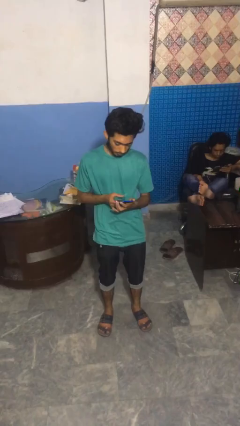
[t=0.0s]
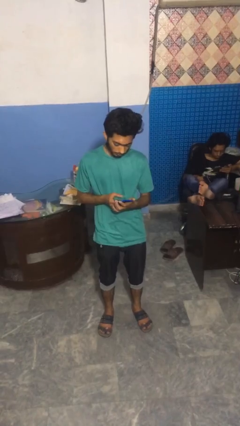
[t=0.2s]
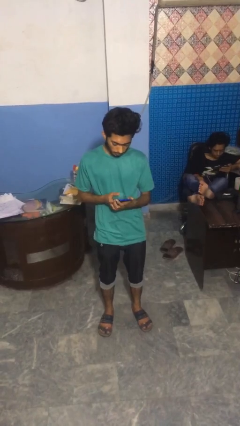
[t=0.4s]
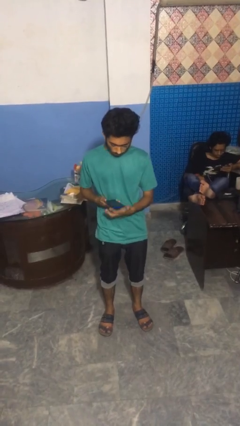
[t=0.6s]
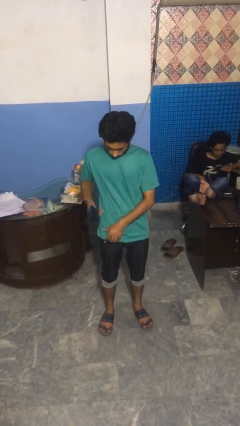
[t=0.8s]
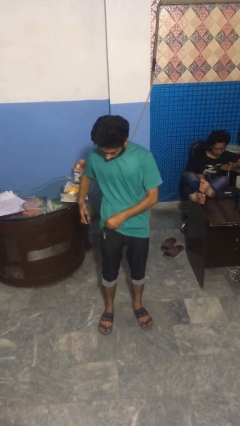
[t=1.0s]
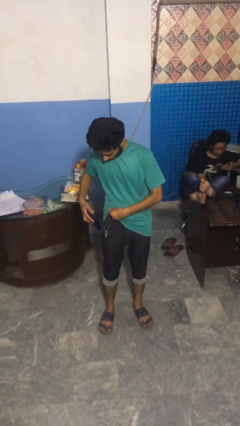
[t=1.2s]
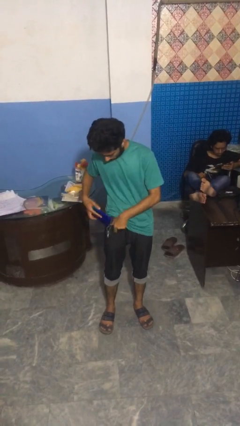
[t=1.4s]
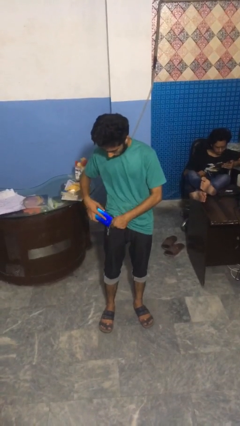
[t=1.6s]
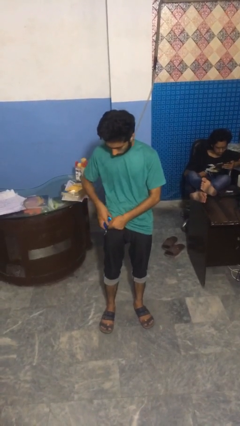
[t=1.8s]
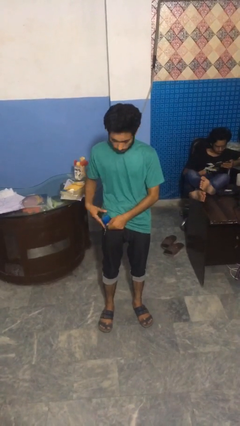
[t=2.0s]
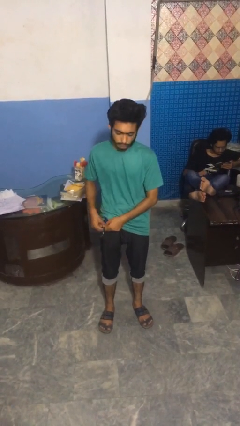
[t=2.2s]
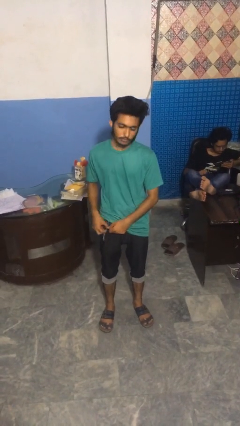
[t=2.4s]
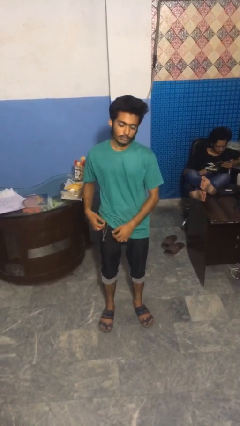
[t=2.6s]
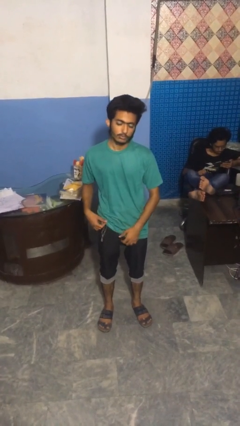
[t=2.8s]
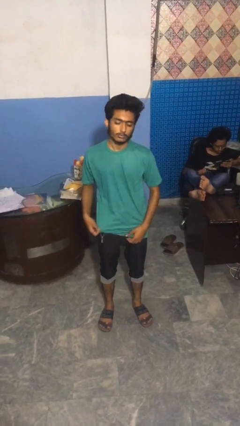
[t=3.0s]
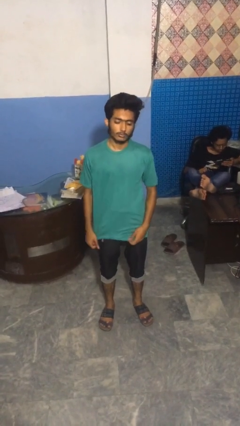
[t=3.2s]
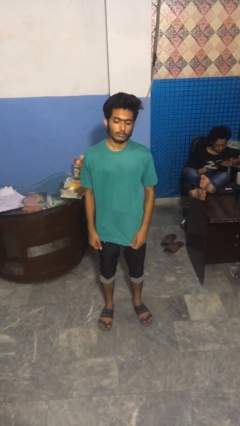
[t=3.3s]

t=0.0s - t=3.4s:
person puts phone into pocket

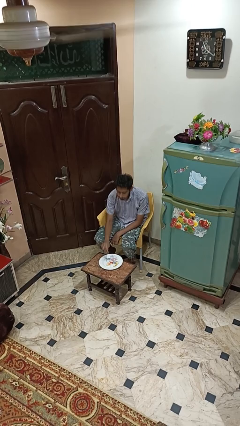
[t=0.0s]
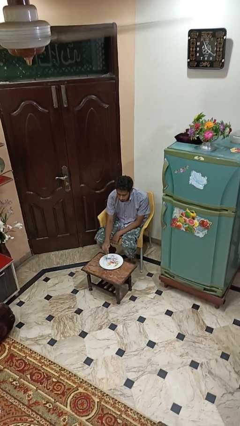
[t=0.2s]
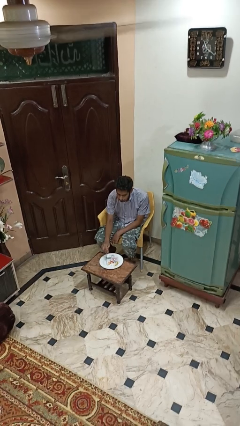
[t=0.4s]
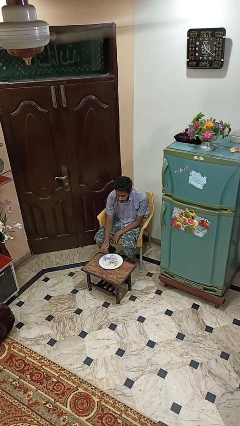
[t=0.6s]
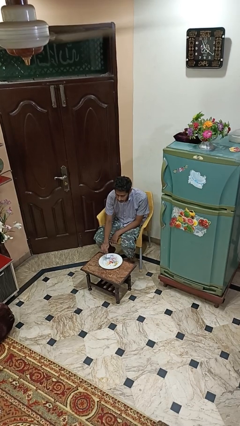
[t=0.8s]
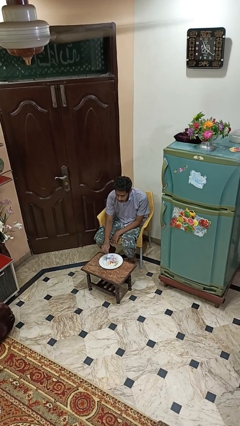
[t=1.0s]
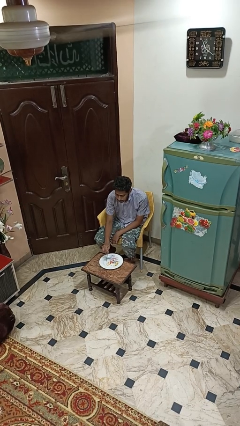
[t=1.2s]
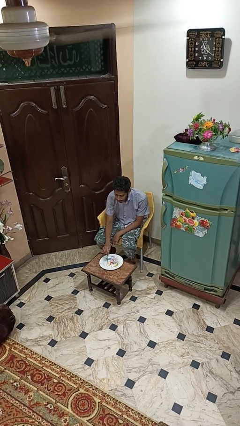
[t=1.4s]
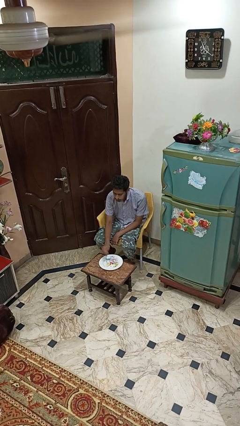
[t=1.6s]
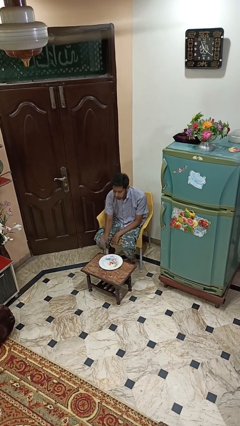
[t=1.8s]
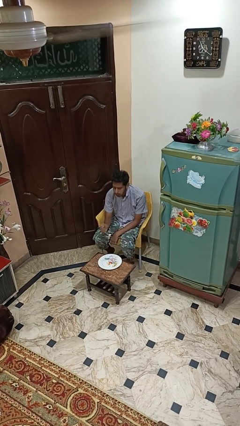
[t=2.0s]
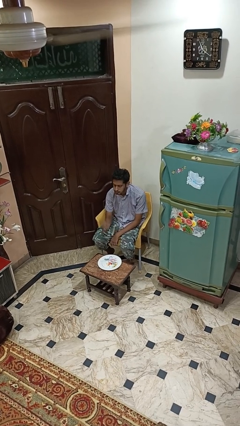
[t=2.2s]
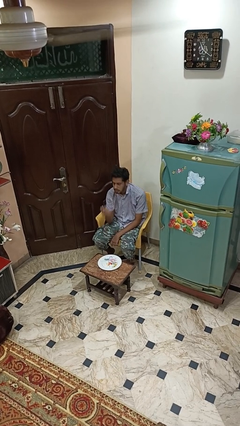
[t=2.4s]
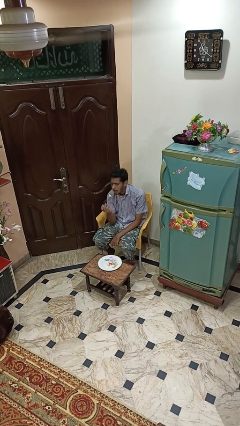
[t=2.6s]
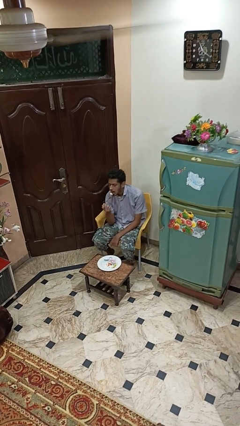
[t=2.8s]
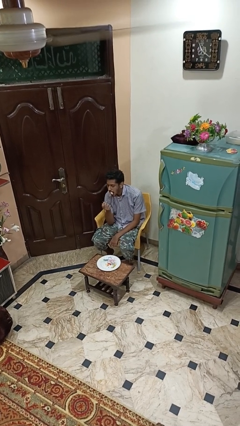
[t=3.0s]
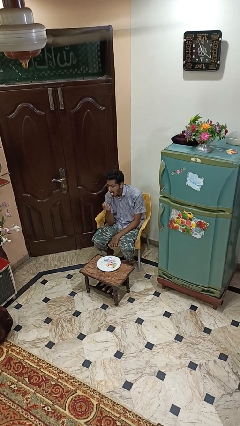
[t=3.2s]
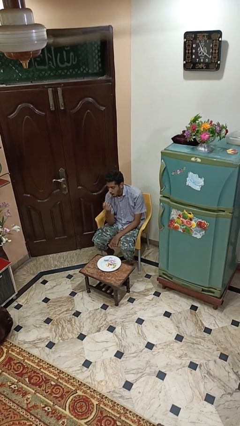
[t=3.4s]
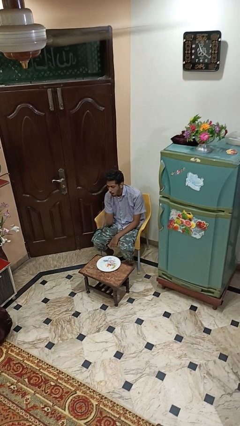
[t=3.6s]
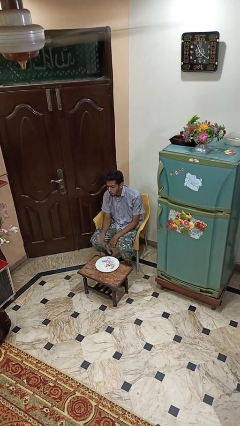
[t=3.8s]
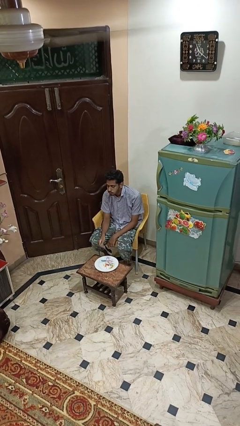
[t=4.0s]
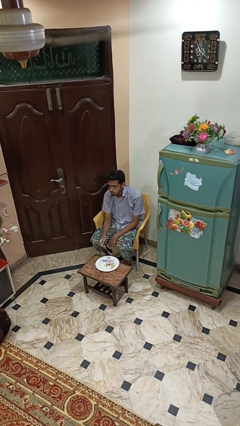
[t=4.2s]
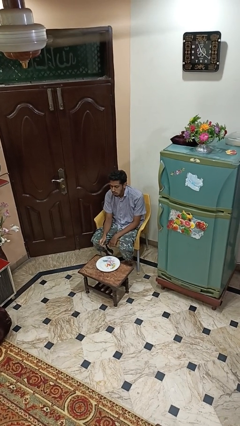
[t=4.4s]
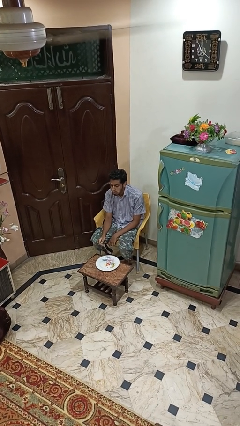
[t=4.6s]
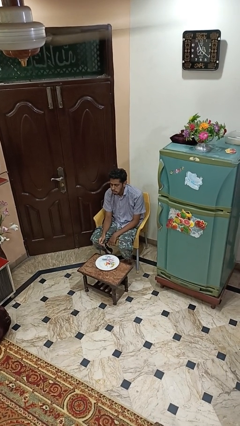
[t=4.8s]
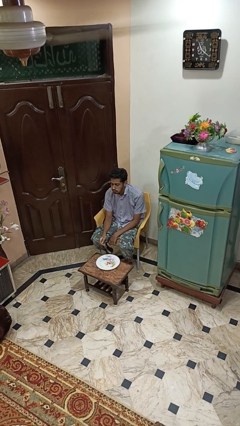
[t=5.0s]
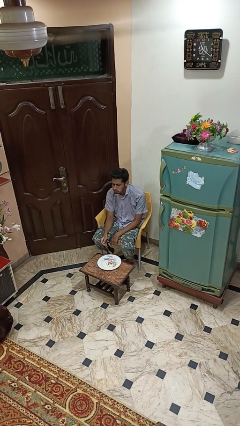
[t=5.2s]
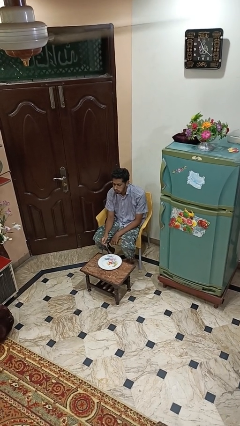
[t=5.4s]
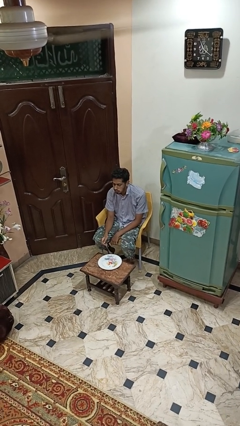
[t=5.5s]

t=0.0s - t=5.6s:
person eats with utensil

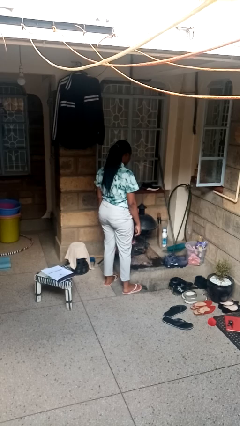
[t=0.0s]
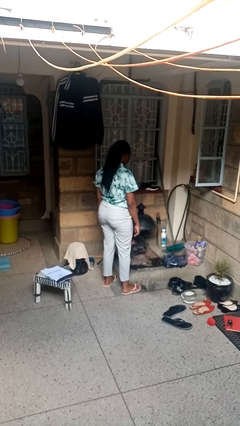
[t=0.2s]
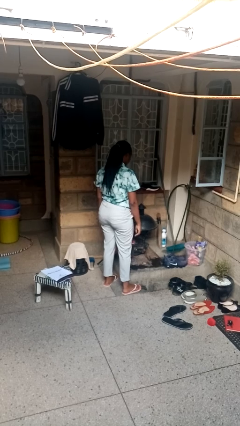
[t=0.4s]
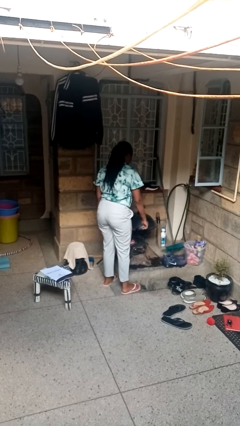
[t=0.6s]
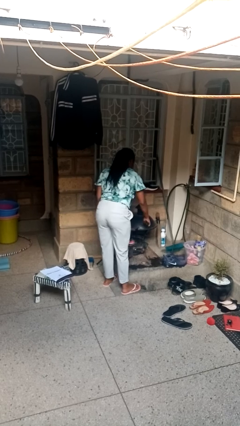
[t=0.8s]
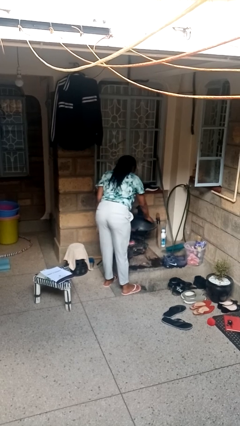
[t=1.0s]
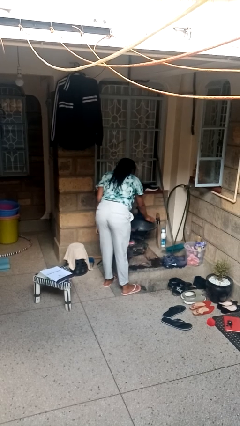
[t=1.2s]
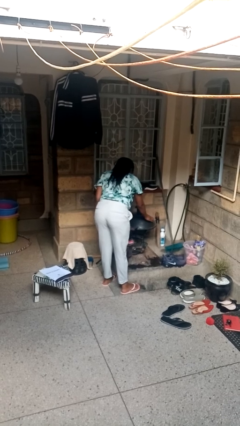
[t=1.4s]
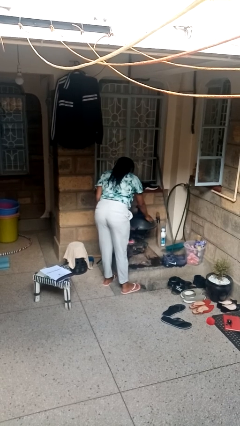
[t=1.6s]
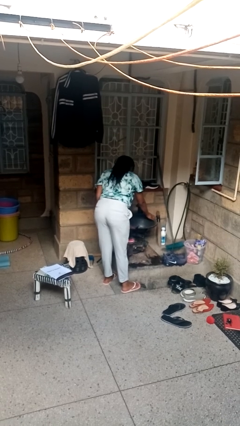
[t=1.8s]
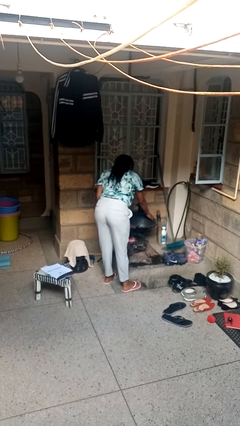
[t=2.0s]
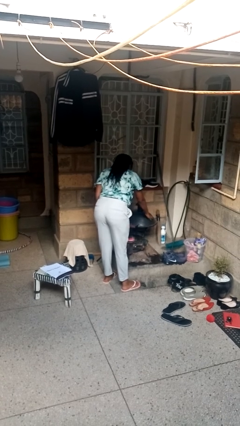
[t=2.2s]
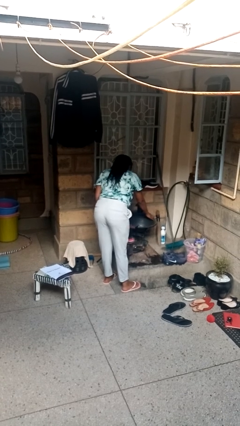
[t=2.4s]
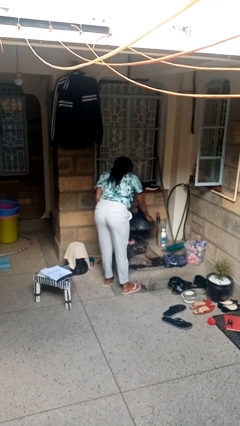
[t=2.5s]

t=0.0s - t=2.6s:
person taps object with finger

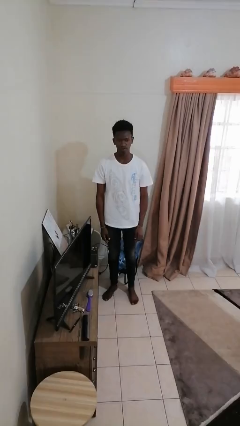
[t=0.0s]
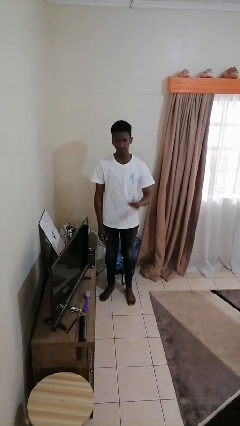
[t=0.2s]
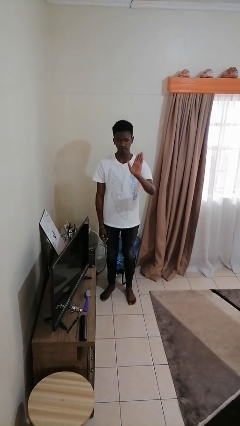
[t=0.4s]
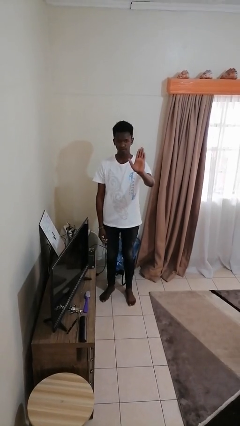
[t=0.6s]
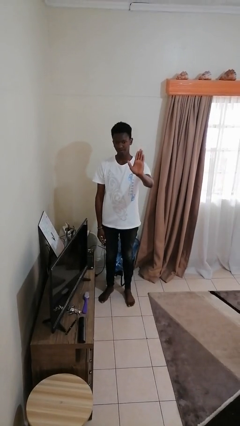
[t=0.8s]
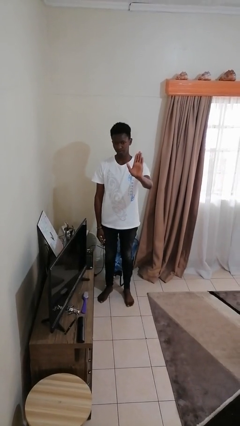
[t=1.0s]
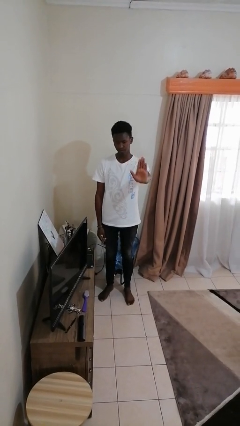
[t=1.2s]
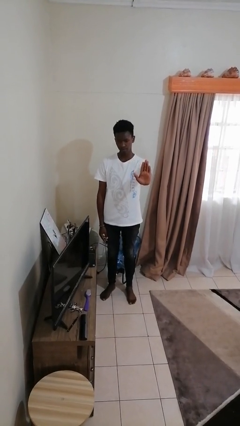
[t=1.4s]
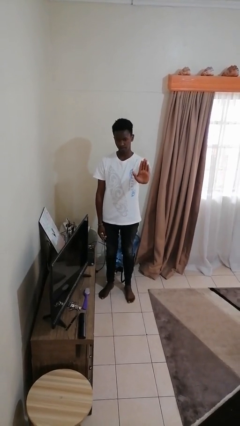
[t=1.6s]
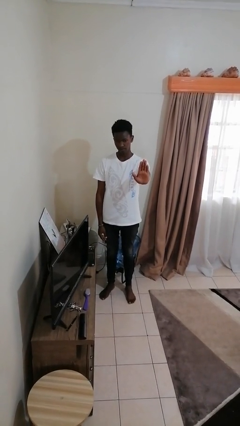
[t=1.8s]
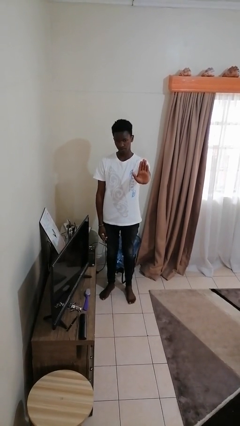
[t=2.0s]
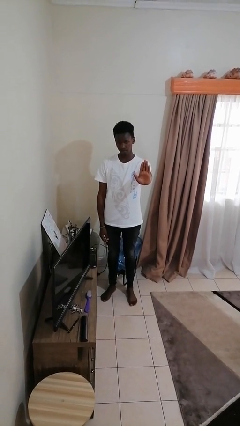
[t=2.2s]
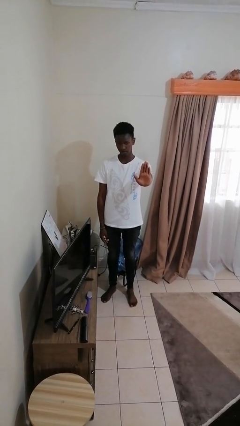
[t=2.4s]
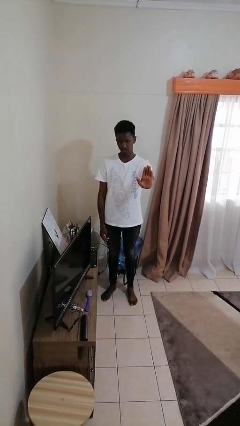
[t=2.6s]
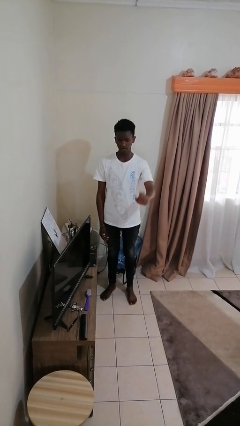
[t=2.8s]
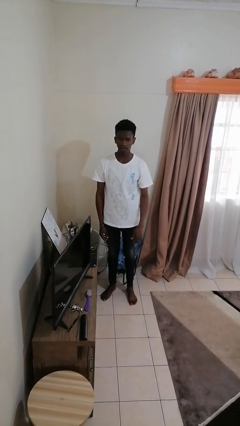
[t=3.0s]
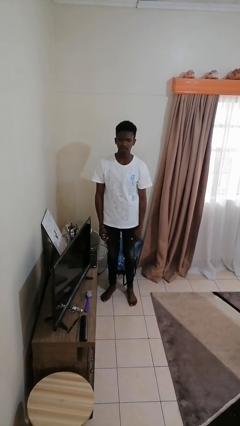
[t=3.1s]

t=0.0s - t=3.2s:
person gestures stop

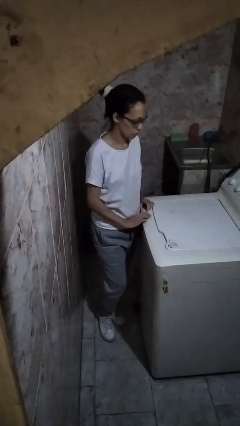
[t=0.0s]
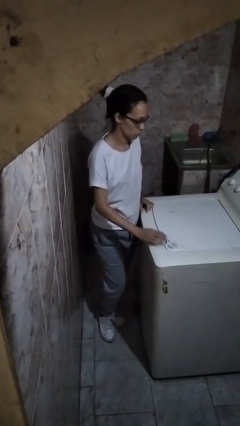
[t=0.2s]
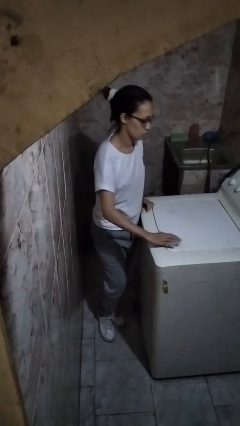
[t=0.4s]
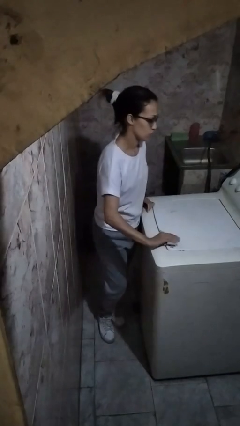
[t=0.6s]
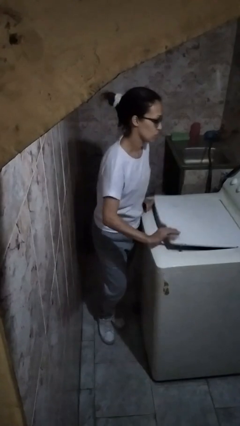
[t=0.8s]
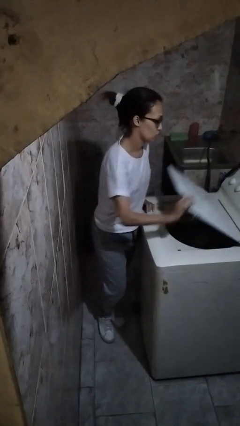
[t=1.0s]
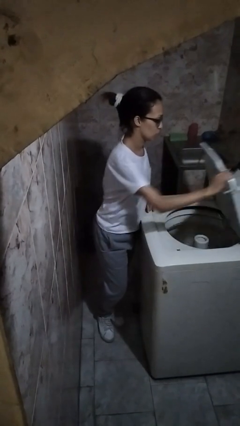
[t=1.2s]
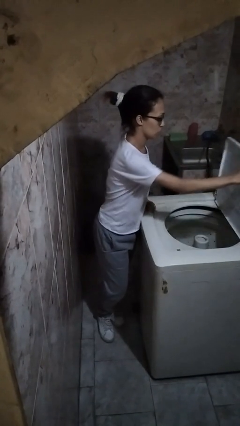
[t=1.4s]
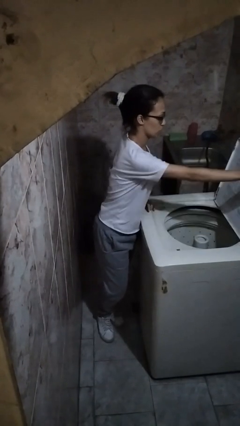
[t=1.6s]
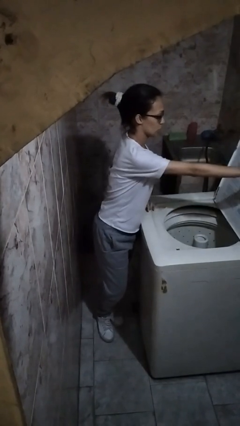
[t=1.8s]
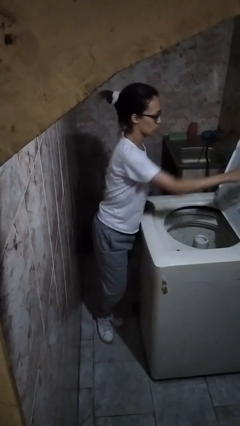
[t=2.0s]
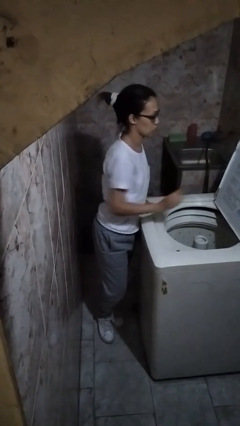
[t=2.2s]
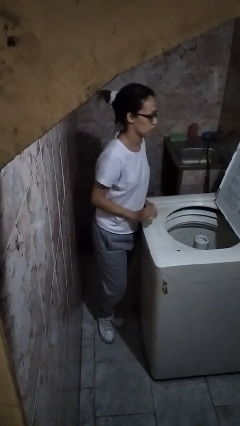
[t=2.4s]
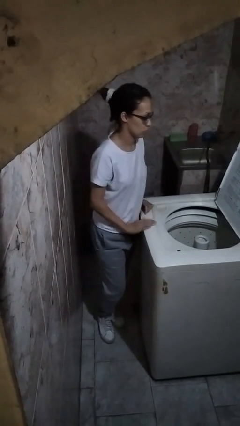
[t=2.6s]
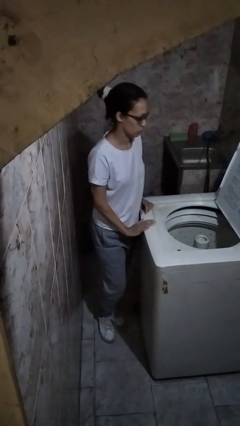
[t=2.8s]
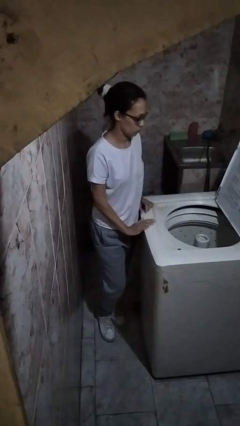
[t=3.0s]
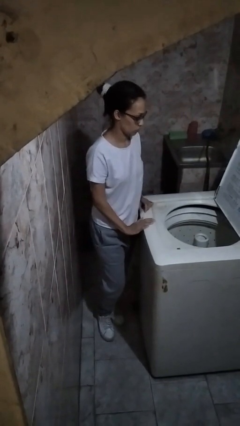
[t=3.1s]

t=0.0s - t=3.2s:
person opens clothes washer
